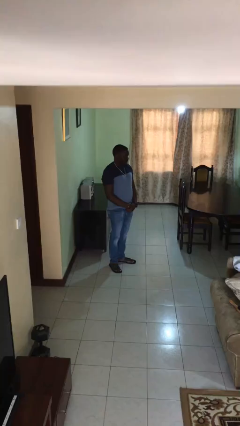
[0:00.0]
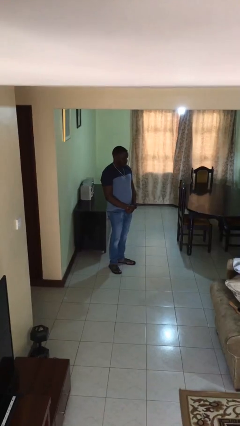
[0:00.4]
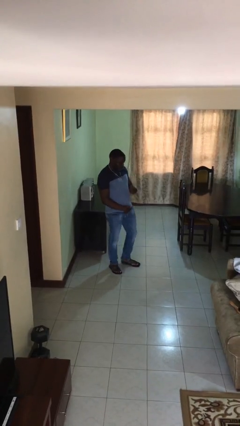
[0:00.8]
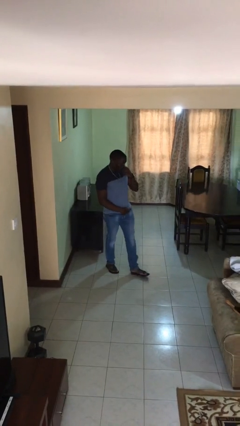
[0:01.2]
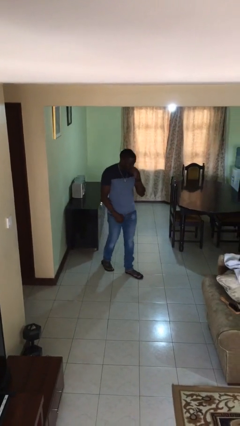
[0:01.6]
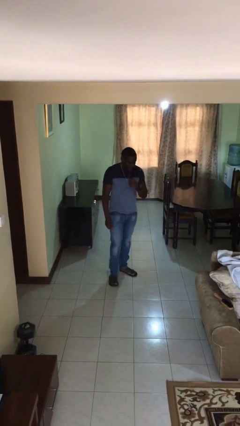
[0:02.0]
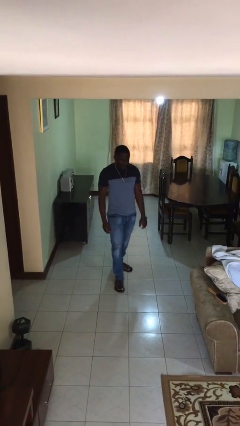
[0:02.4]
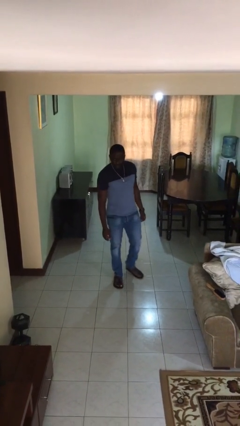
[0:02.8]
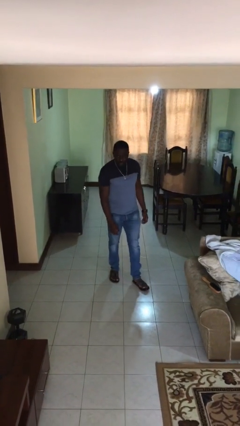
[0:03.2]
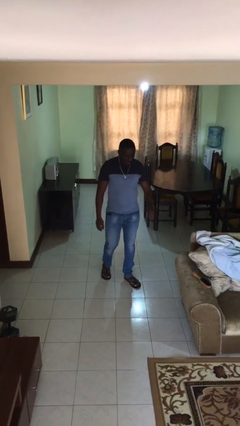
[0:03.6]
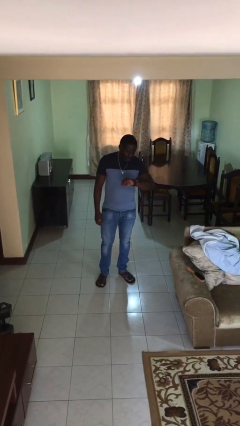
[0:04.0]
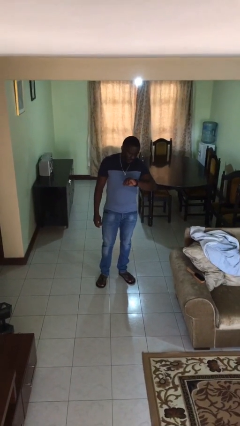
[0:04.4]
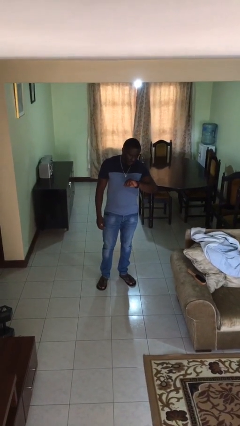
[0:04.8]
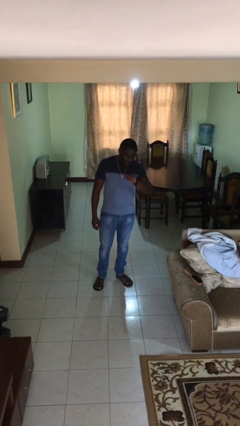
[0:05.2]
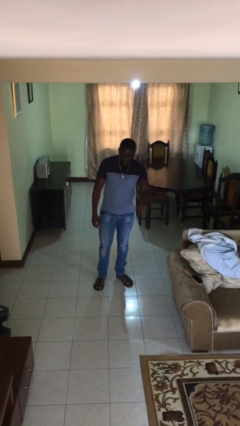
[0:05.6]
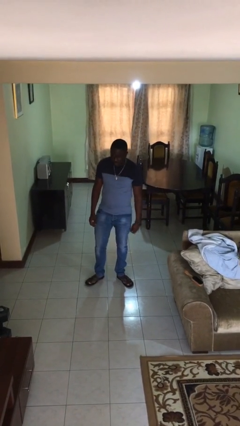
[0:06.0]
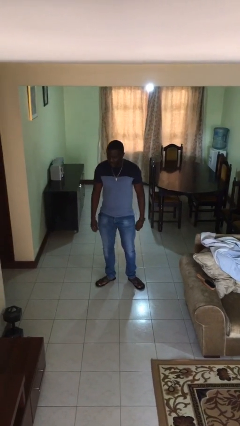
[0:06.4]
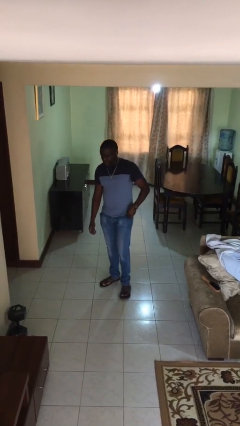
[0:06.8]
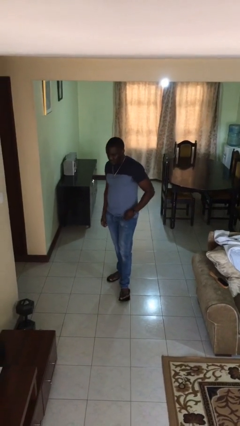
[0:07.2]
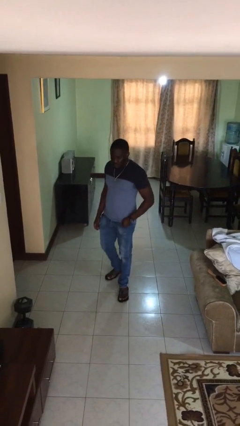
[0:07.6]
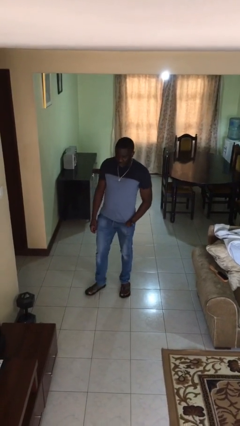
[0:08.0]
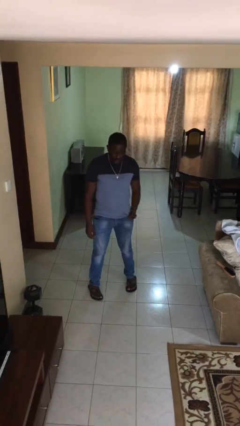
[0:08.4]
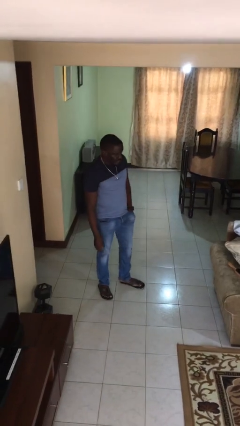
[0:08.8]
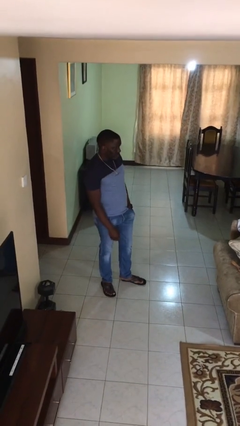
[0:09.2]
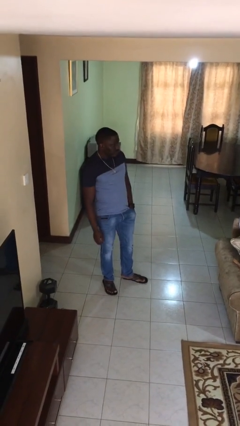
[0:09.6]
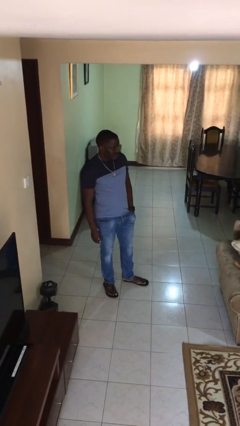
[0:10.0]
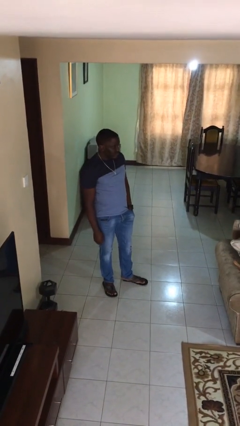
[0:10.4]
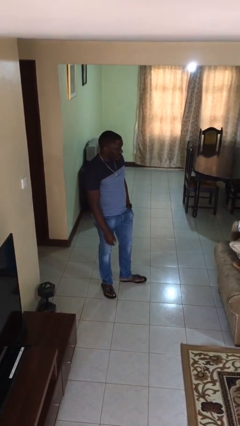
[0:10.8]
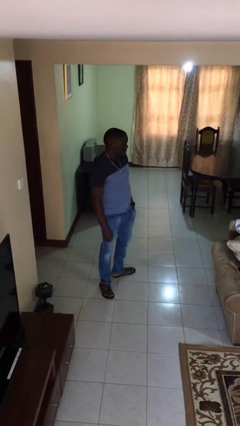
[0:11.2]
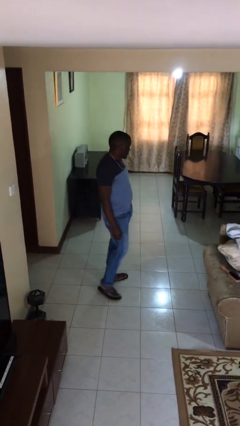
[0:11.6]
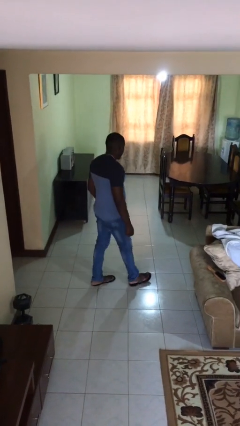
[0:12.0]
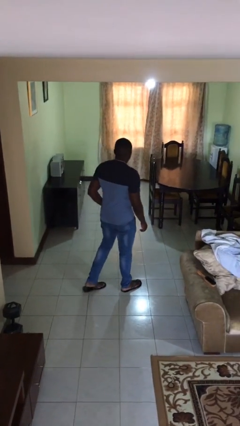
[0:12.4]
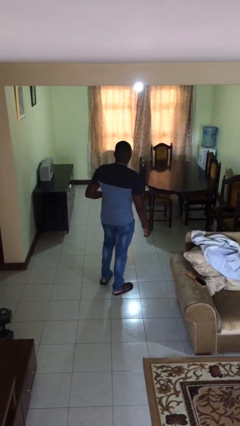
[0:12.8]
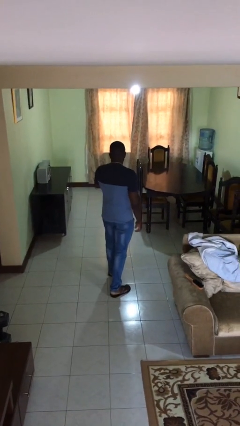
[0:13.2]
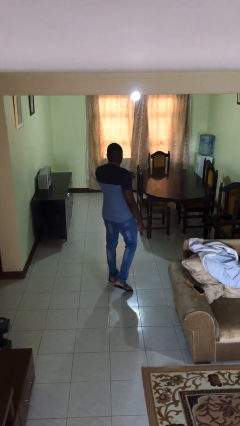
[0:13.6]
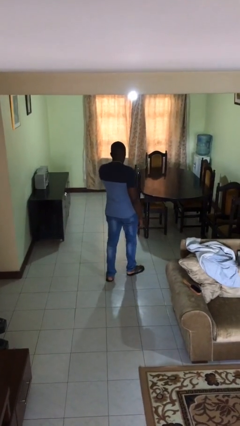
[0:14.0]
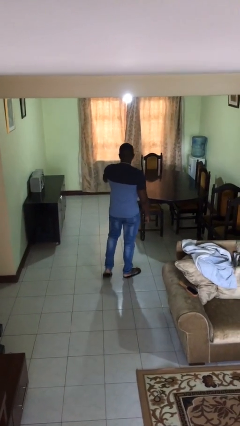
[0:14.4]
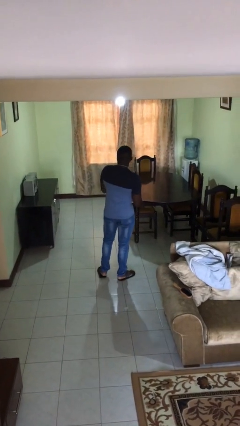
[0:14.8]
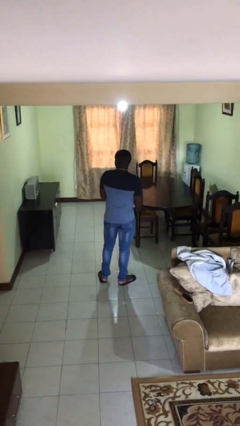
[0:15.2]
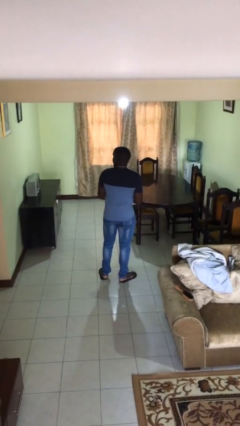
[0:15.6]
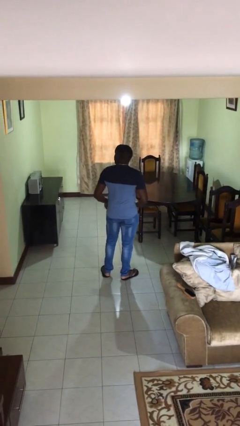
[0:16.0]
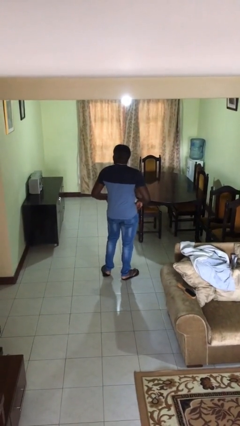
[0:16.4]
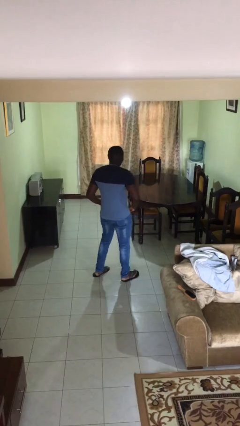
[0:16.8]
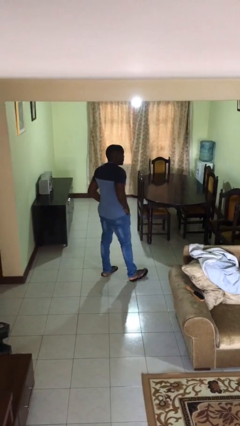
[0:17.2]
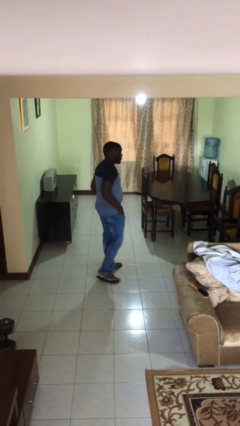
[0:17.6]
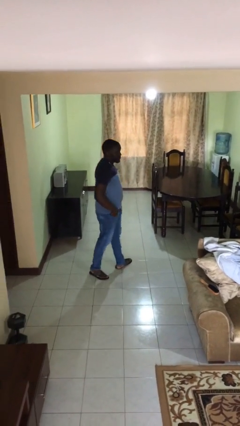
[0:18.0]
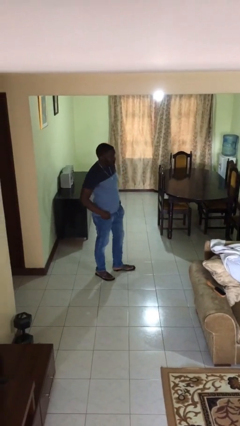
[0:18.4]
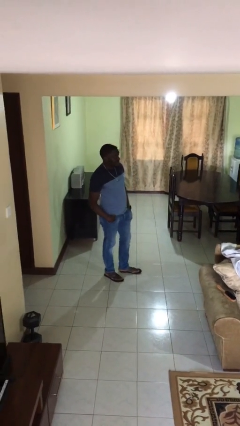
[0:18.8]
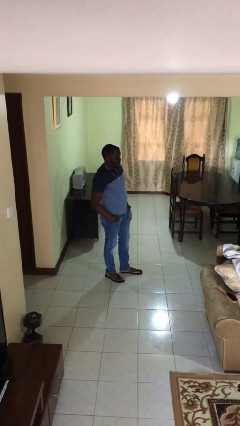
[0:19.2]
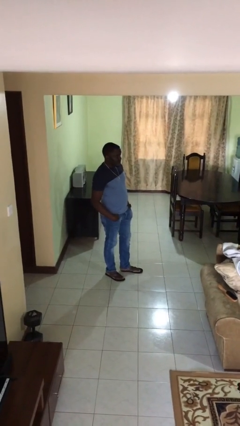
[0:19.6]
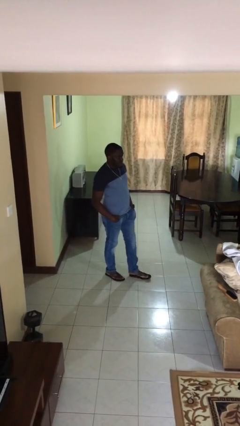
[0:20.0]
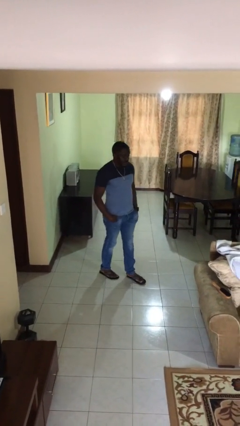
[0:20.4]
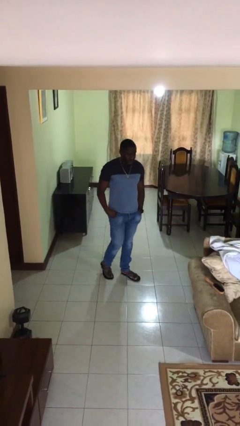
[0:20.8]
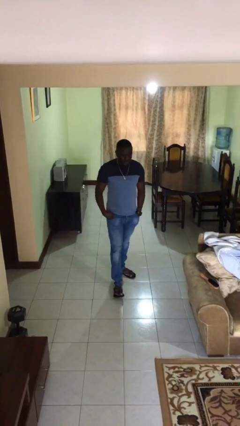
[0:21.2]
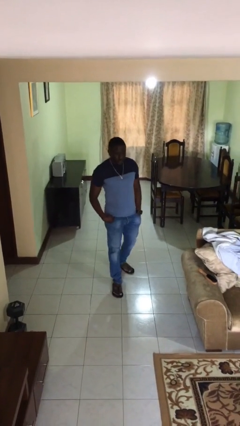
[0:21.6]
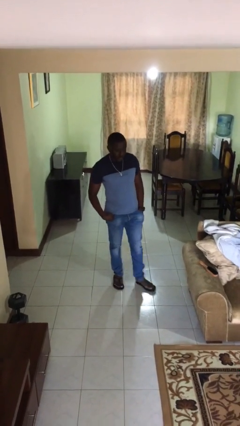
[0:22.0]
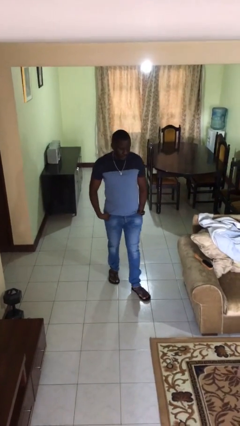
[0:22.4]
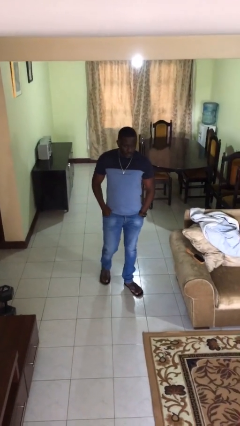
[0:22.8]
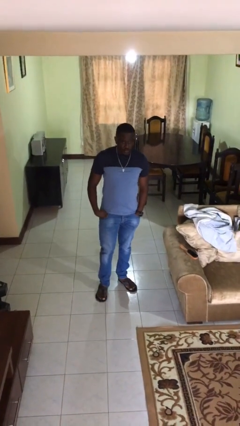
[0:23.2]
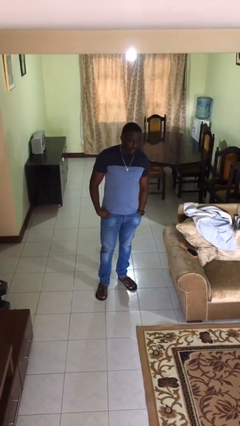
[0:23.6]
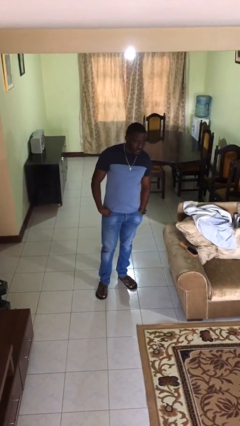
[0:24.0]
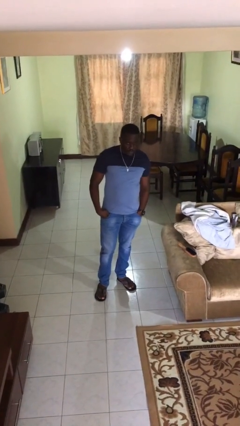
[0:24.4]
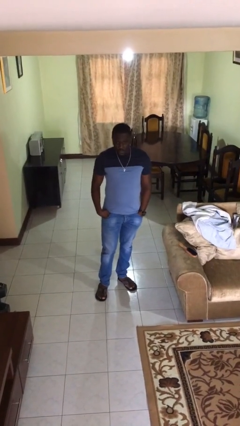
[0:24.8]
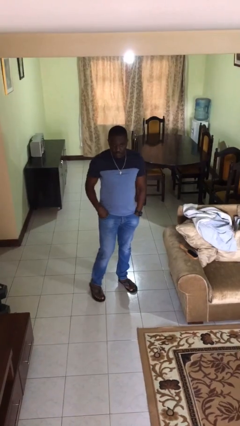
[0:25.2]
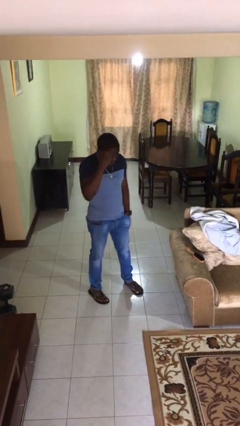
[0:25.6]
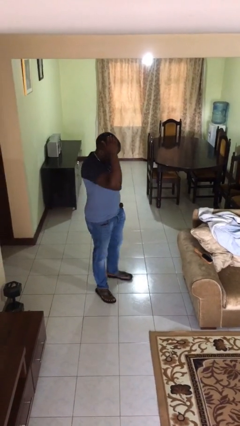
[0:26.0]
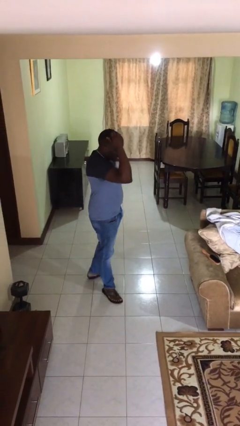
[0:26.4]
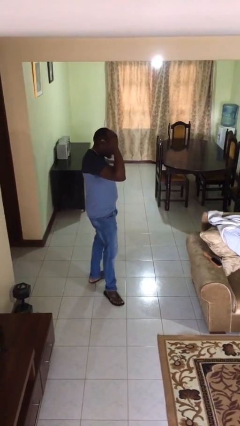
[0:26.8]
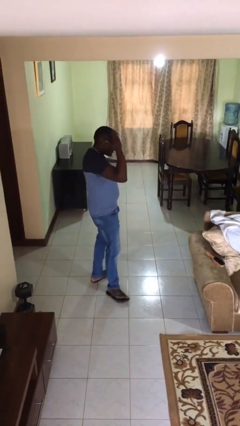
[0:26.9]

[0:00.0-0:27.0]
person walks

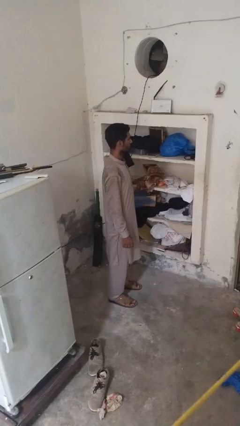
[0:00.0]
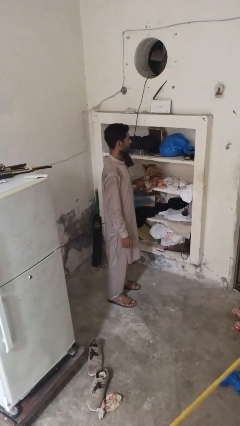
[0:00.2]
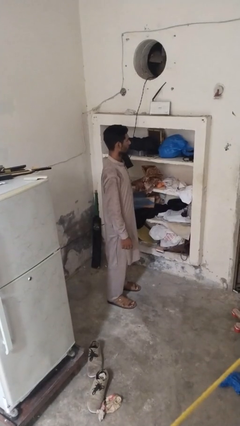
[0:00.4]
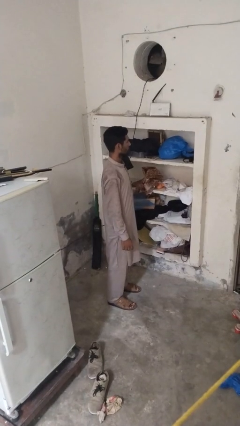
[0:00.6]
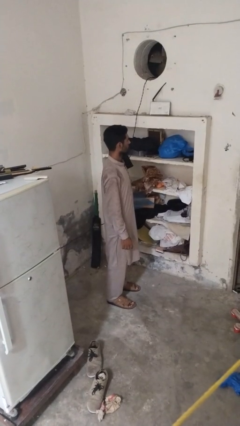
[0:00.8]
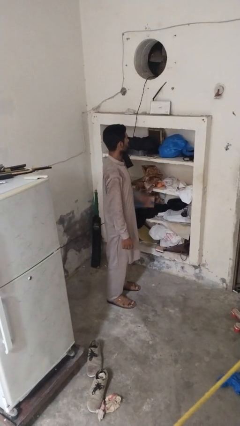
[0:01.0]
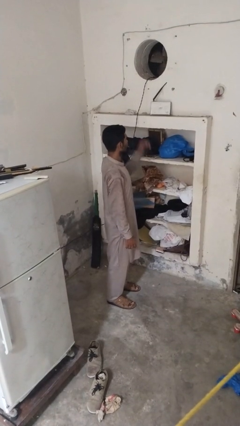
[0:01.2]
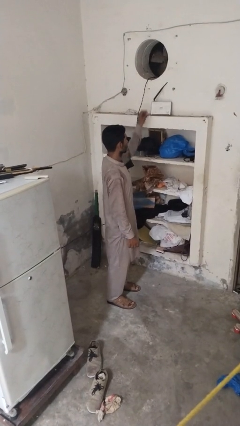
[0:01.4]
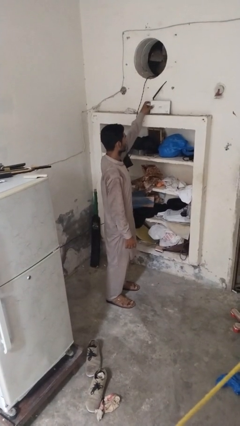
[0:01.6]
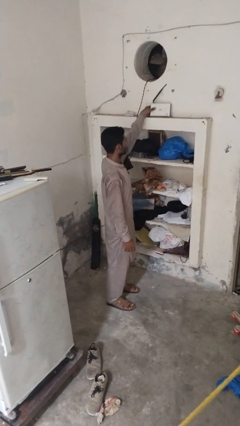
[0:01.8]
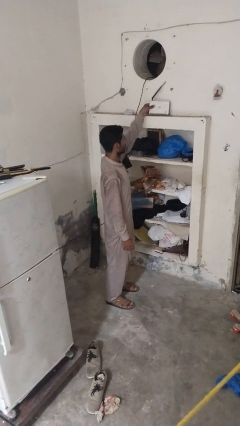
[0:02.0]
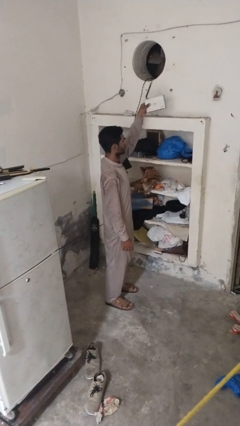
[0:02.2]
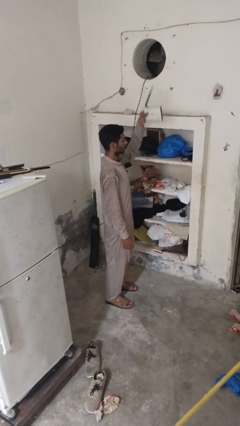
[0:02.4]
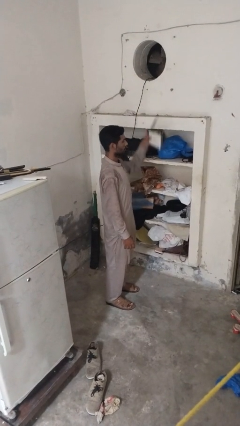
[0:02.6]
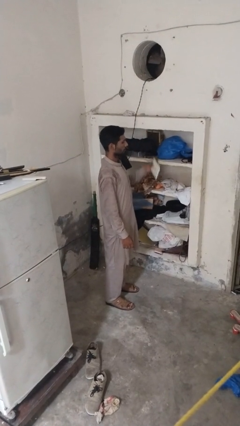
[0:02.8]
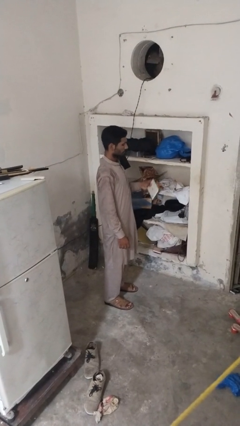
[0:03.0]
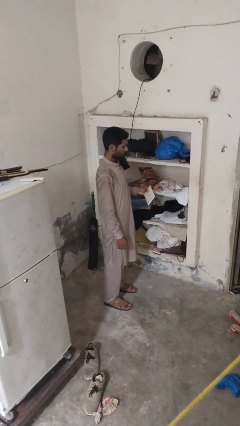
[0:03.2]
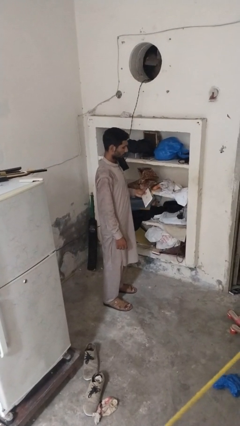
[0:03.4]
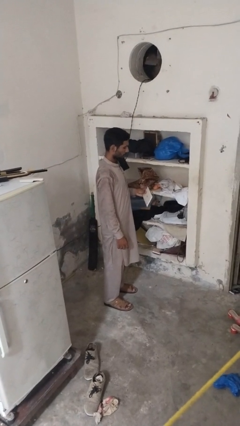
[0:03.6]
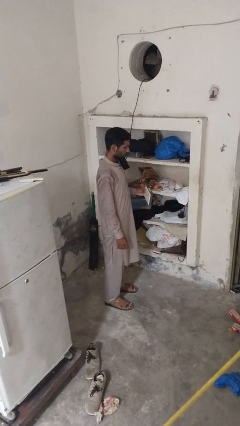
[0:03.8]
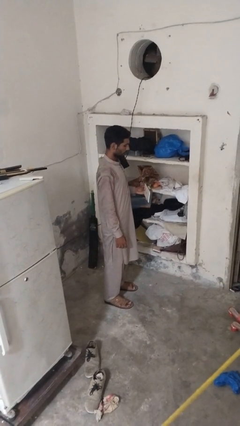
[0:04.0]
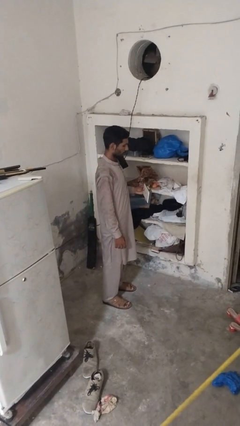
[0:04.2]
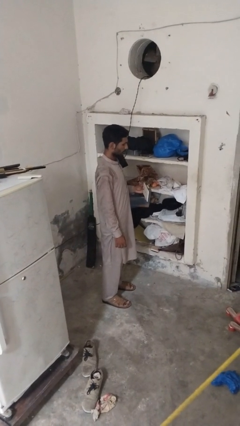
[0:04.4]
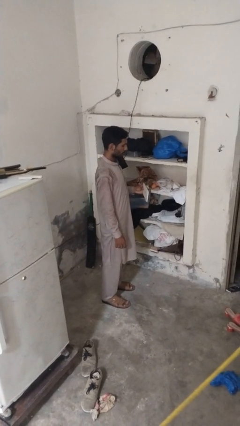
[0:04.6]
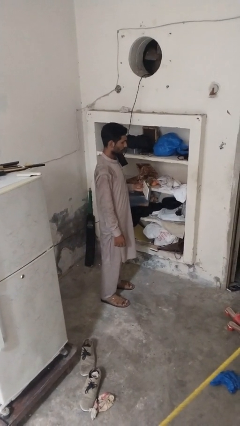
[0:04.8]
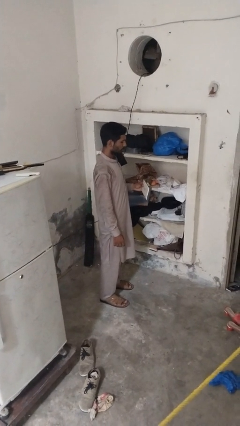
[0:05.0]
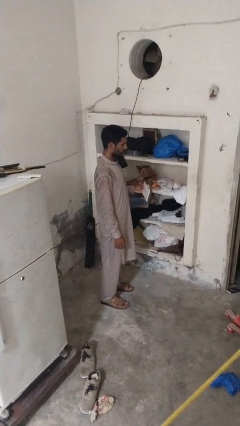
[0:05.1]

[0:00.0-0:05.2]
person picks up object from shelf
